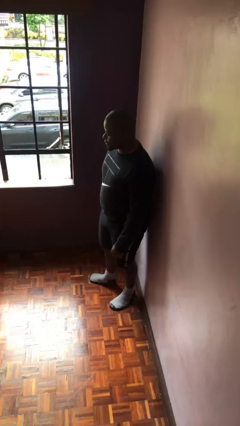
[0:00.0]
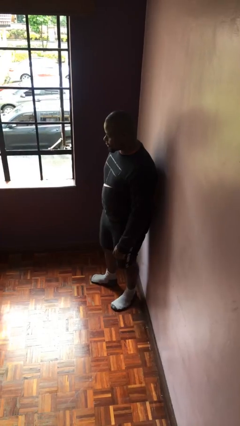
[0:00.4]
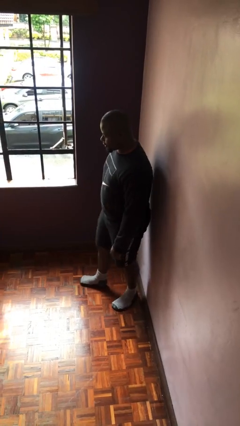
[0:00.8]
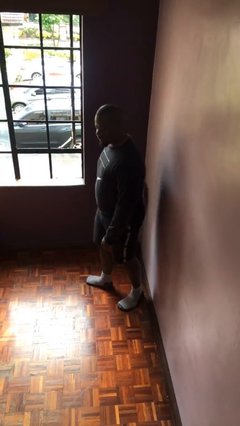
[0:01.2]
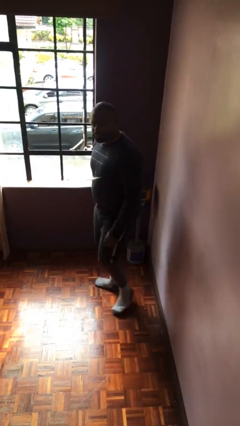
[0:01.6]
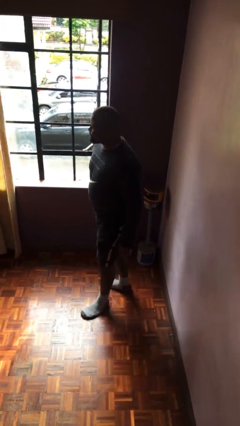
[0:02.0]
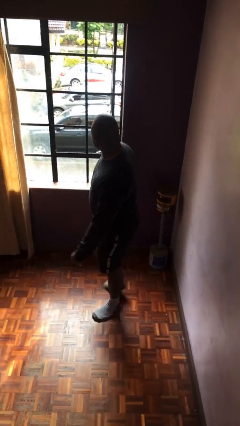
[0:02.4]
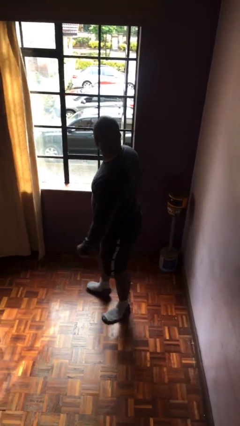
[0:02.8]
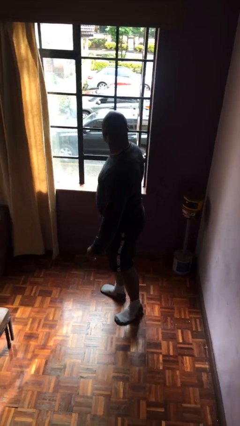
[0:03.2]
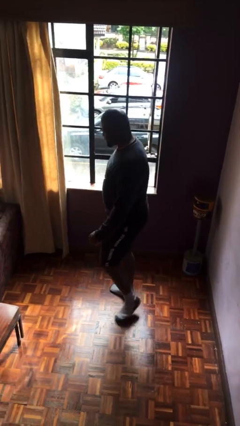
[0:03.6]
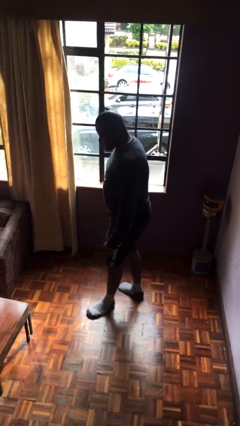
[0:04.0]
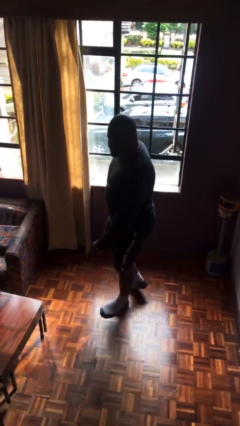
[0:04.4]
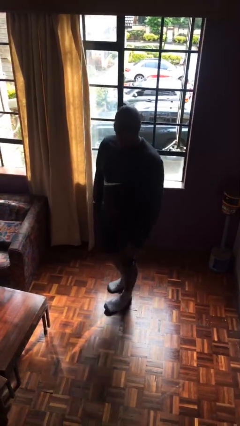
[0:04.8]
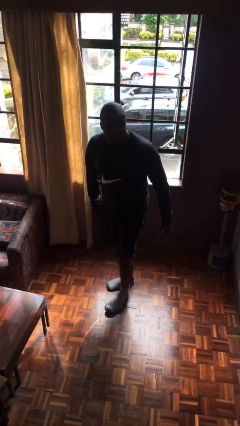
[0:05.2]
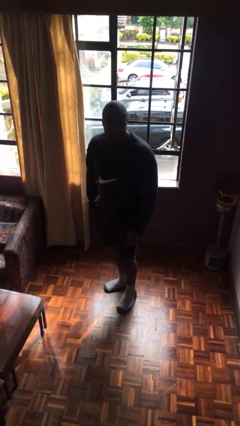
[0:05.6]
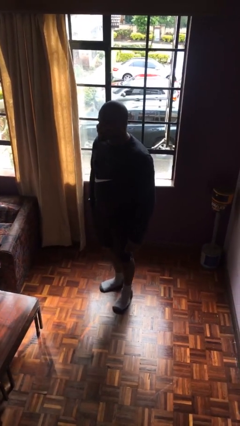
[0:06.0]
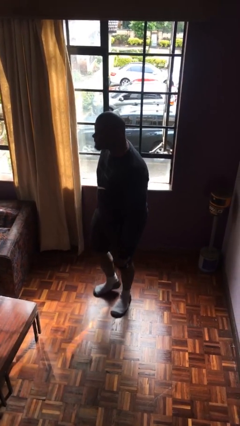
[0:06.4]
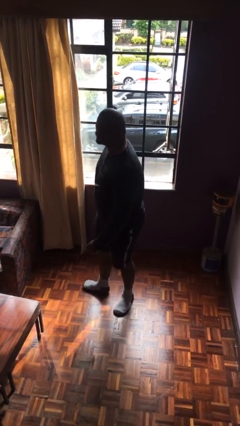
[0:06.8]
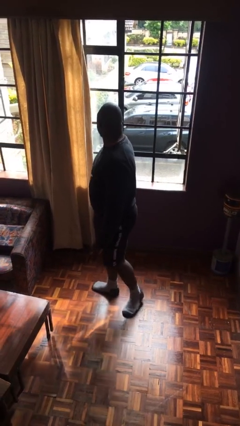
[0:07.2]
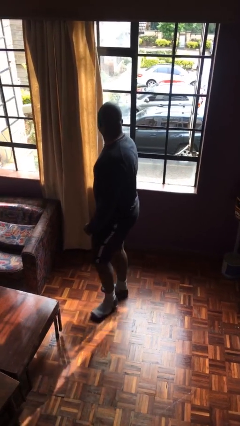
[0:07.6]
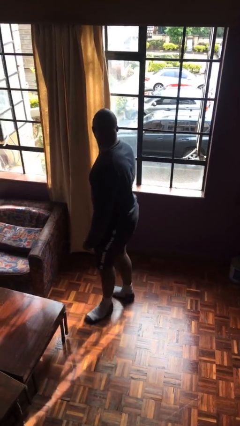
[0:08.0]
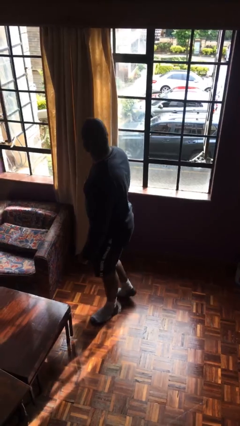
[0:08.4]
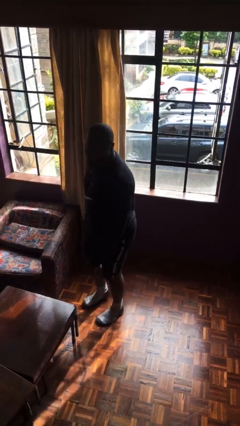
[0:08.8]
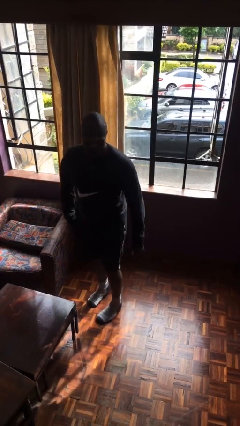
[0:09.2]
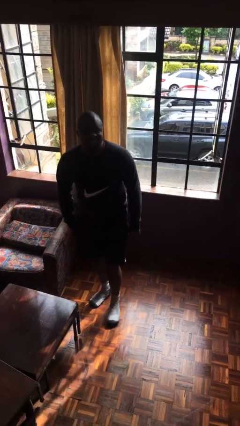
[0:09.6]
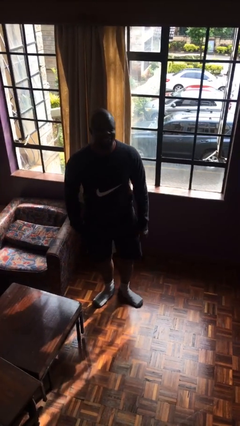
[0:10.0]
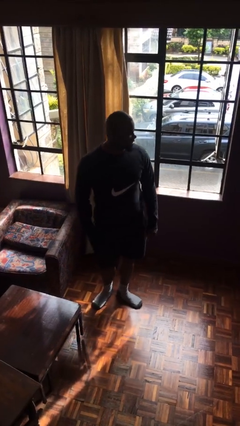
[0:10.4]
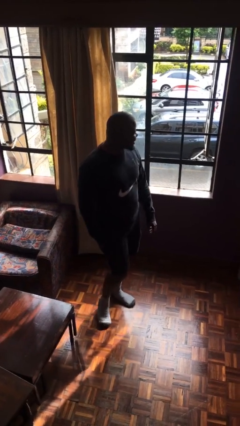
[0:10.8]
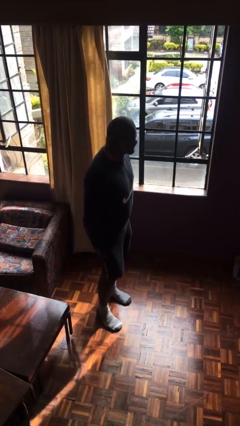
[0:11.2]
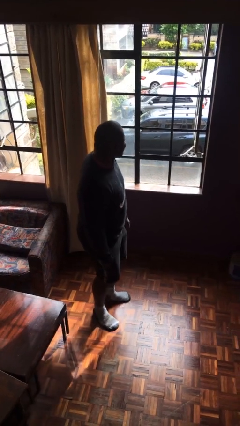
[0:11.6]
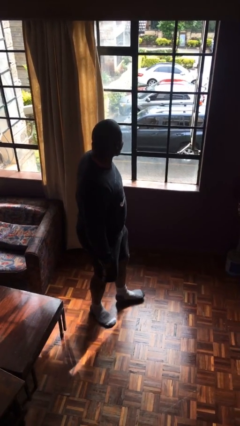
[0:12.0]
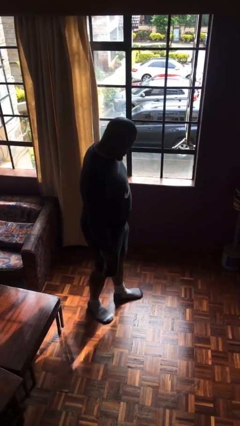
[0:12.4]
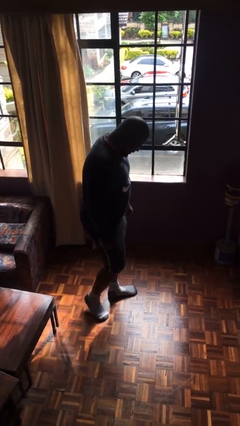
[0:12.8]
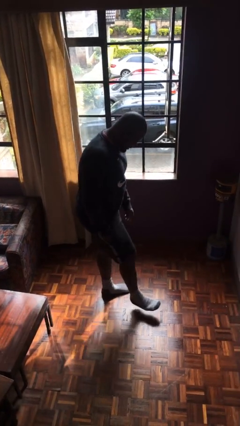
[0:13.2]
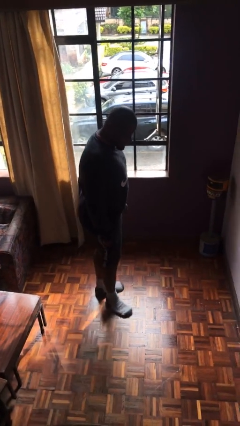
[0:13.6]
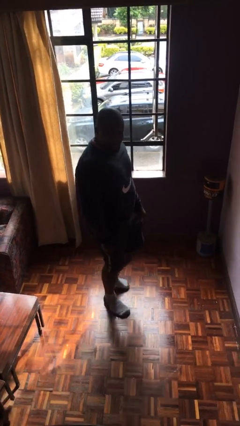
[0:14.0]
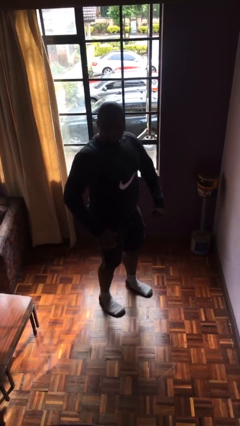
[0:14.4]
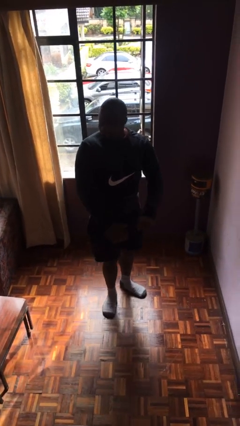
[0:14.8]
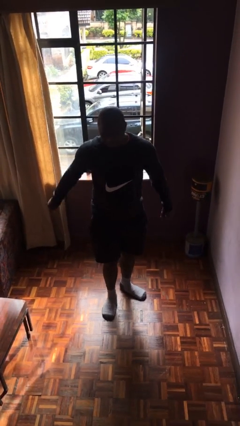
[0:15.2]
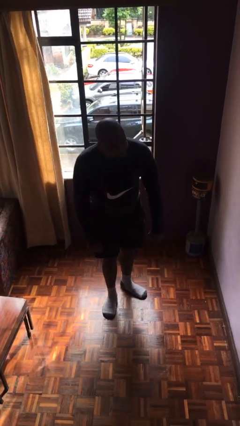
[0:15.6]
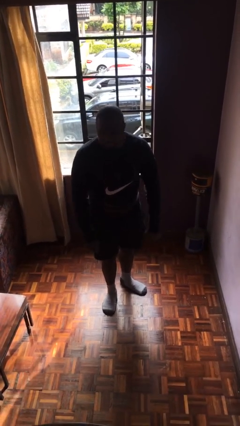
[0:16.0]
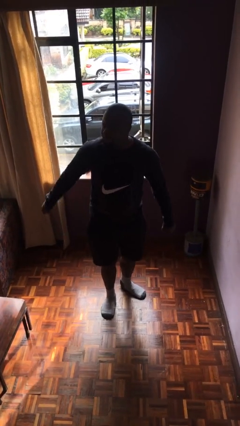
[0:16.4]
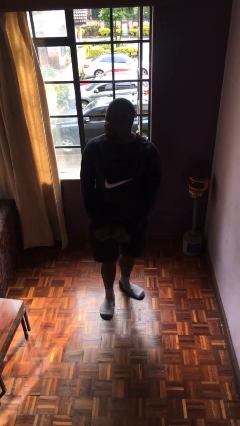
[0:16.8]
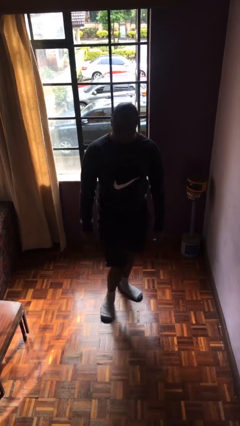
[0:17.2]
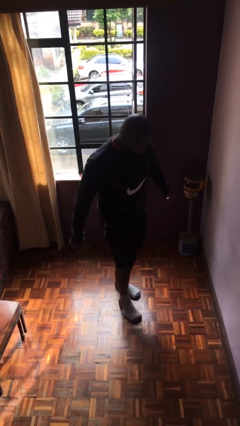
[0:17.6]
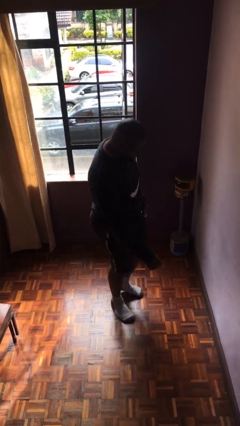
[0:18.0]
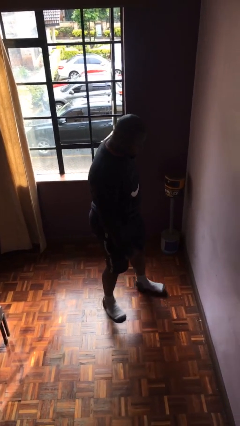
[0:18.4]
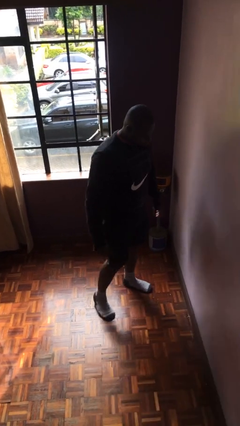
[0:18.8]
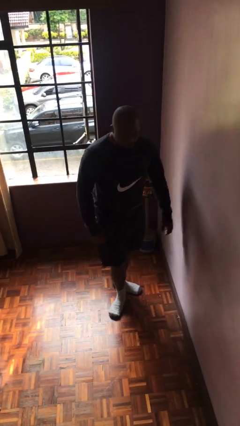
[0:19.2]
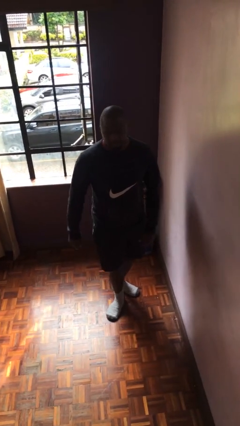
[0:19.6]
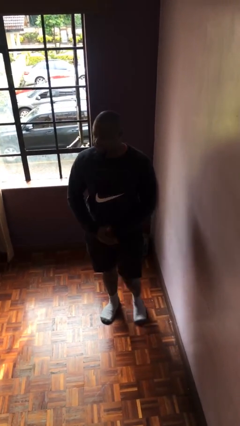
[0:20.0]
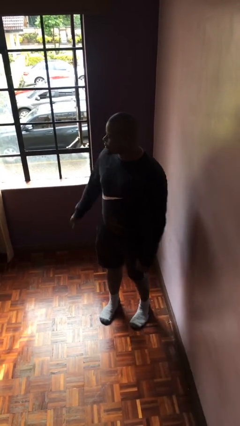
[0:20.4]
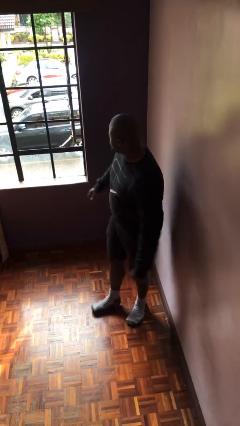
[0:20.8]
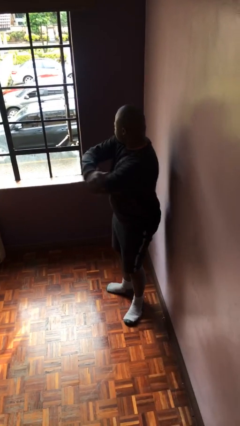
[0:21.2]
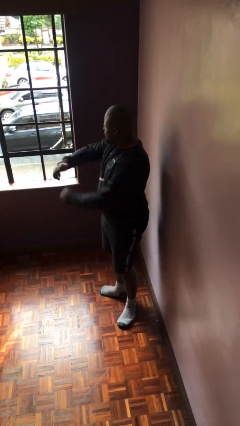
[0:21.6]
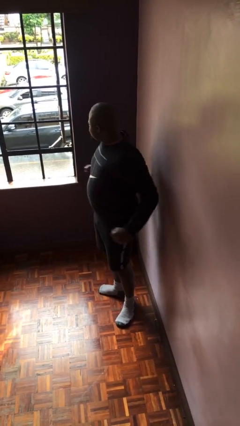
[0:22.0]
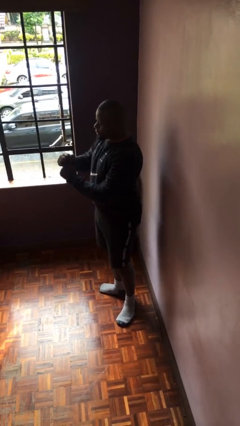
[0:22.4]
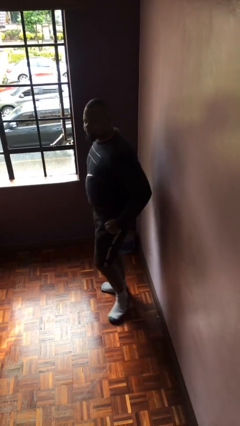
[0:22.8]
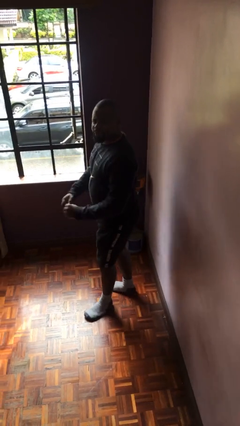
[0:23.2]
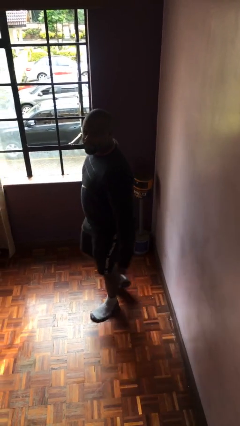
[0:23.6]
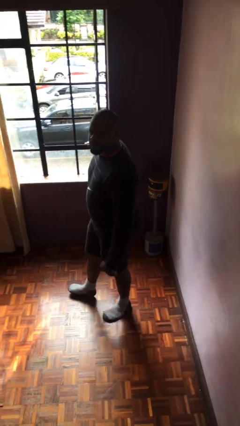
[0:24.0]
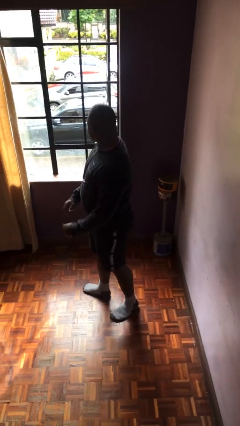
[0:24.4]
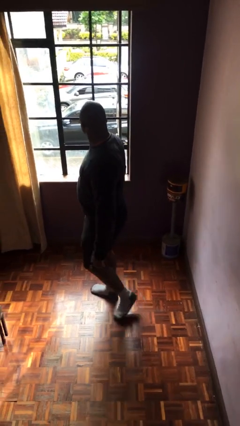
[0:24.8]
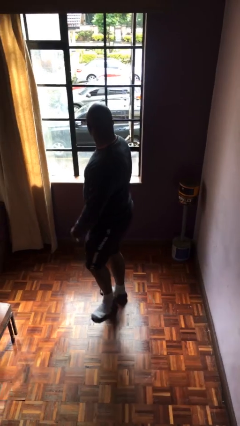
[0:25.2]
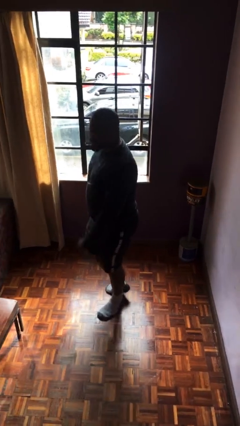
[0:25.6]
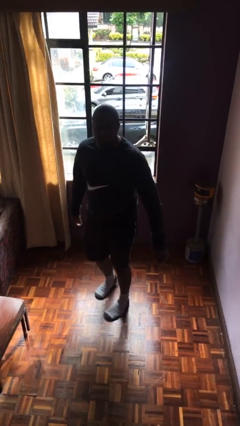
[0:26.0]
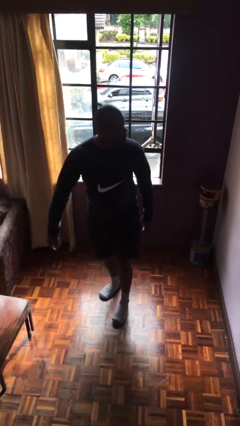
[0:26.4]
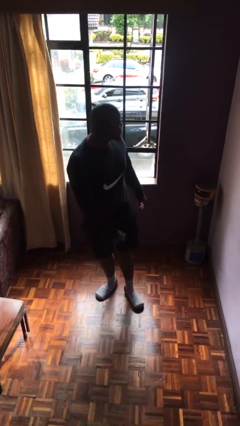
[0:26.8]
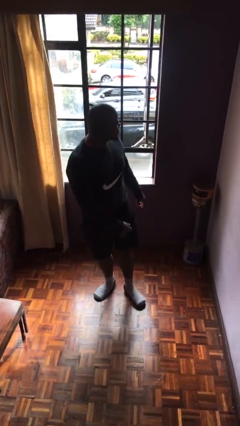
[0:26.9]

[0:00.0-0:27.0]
person walks

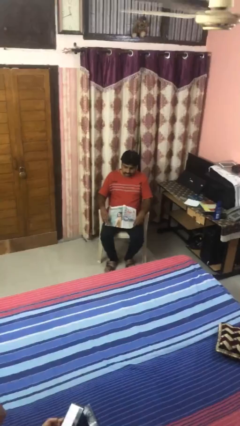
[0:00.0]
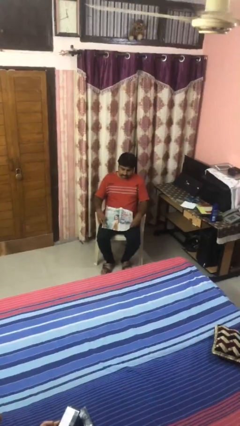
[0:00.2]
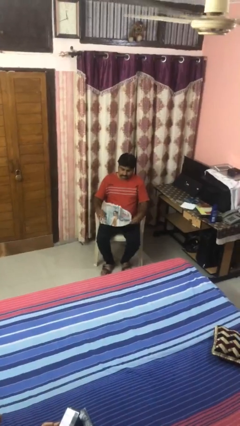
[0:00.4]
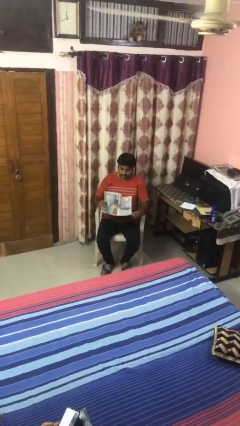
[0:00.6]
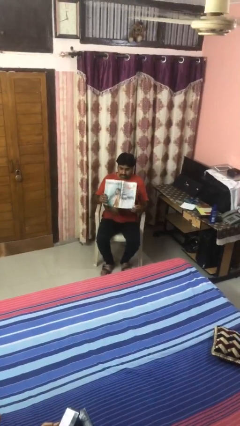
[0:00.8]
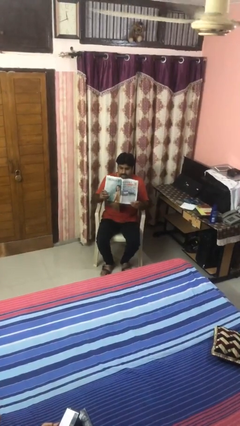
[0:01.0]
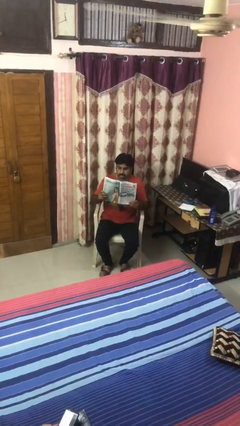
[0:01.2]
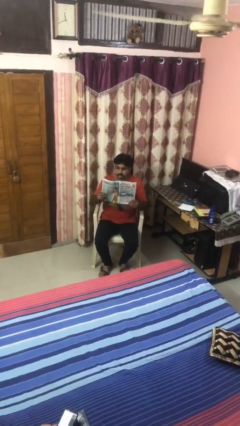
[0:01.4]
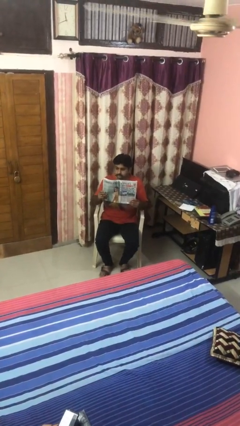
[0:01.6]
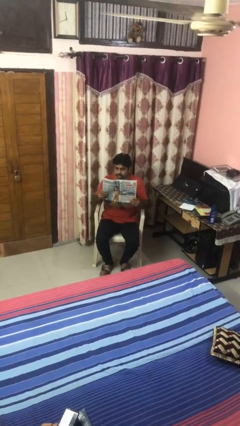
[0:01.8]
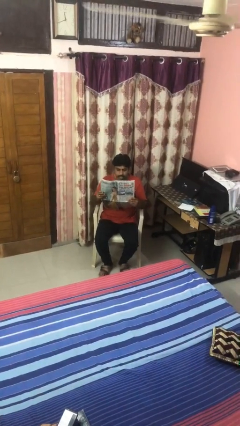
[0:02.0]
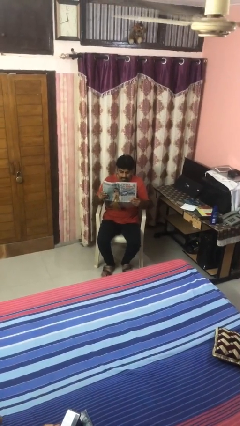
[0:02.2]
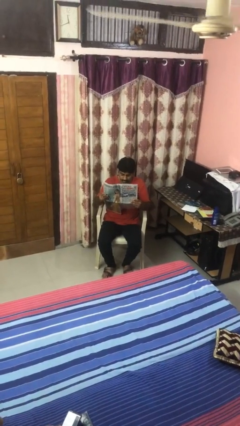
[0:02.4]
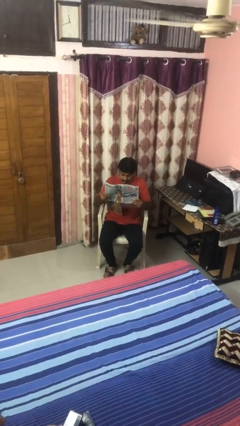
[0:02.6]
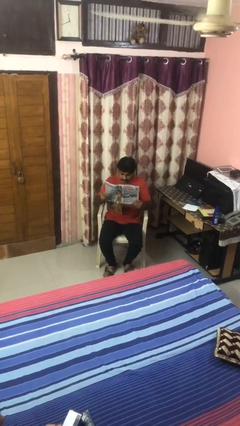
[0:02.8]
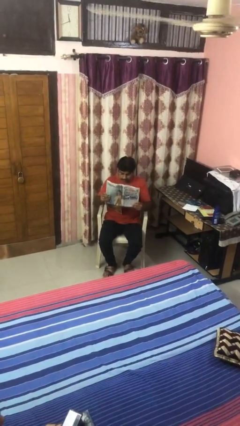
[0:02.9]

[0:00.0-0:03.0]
person reads newspaper

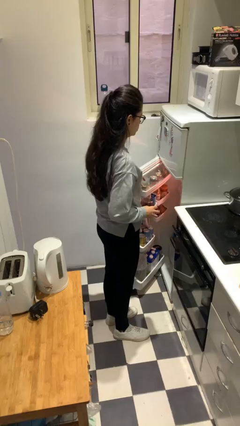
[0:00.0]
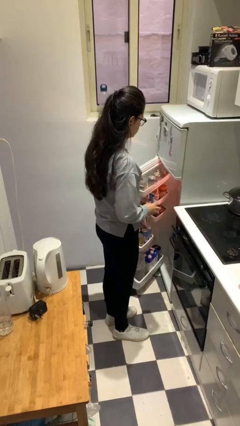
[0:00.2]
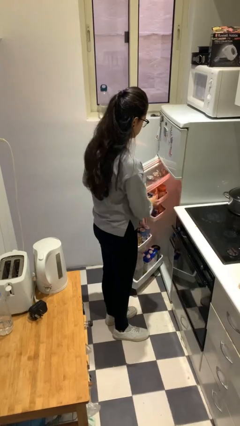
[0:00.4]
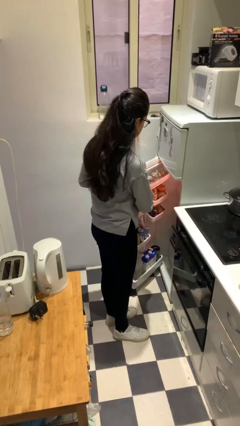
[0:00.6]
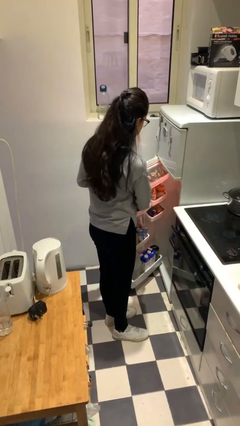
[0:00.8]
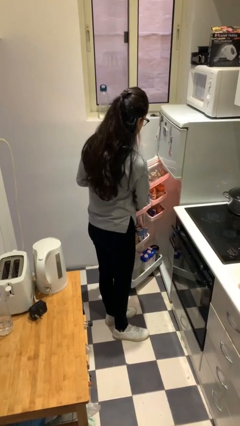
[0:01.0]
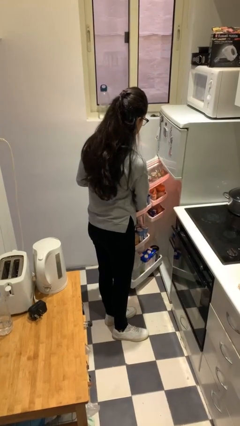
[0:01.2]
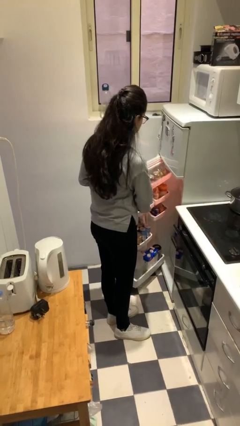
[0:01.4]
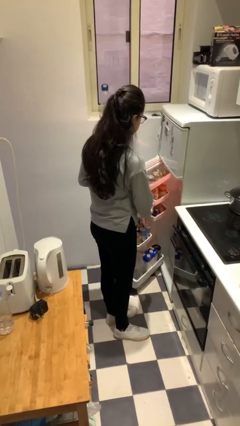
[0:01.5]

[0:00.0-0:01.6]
person takes object from refrigerator

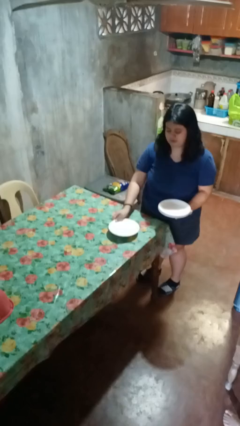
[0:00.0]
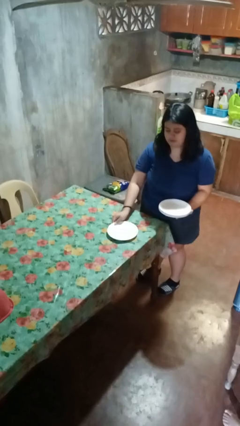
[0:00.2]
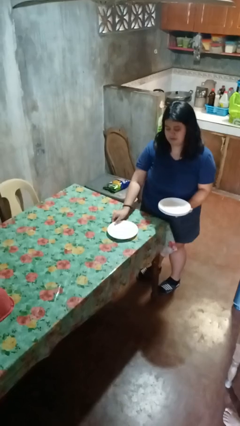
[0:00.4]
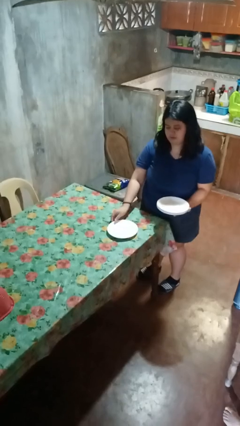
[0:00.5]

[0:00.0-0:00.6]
person sets table
